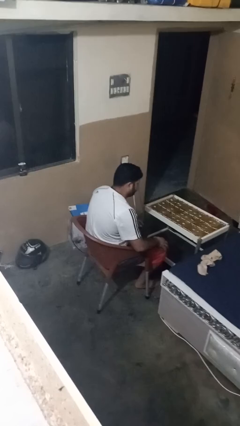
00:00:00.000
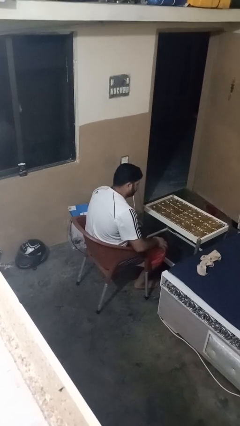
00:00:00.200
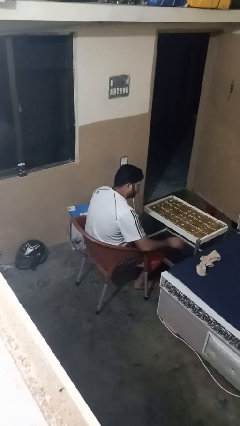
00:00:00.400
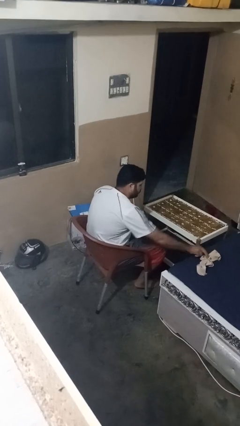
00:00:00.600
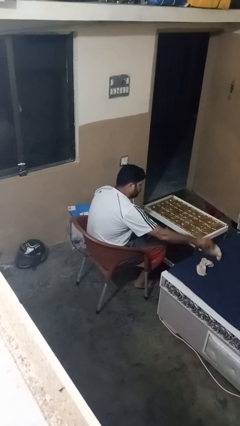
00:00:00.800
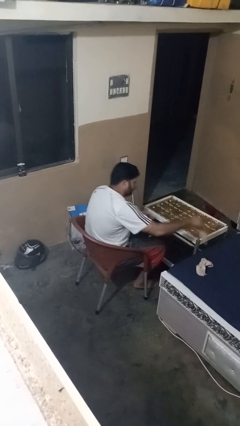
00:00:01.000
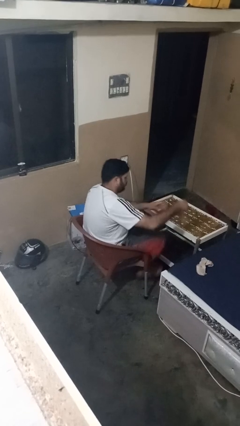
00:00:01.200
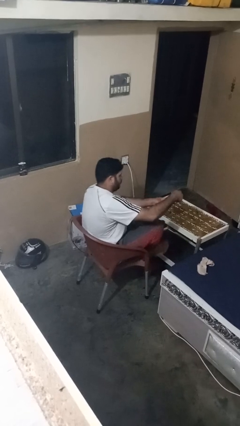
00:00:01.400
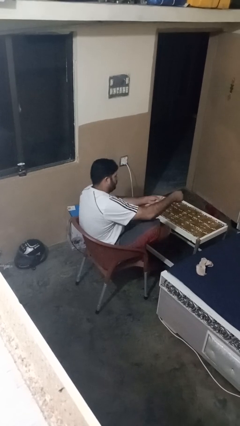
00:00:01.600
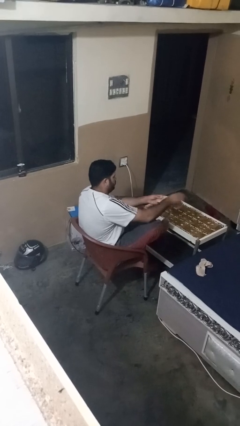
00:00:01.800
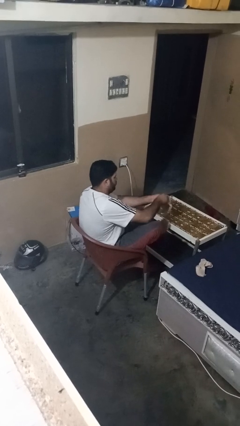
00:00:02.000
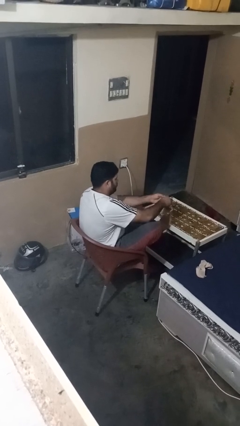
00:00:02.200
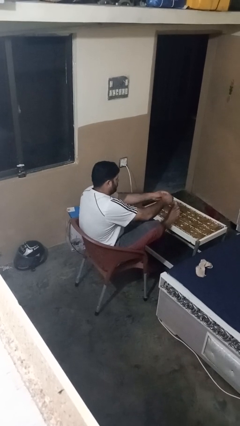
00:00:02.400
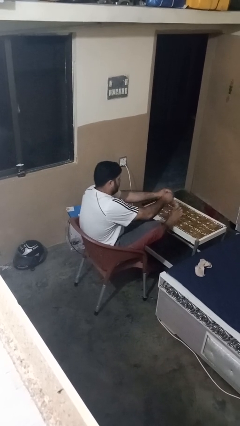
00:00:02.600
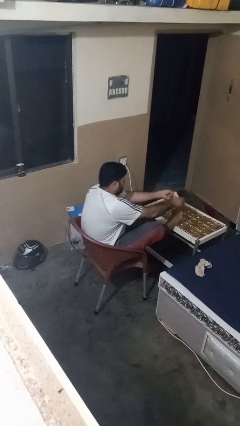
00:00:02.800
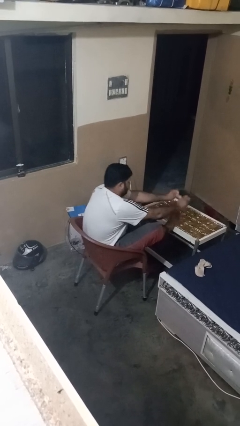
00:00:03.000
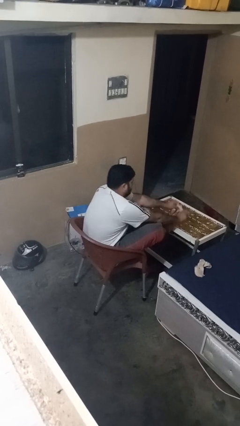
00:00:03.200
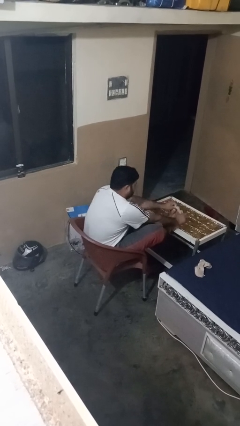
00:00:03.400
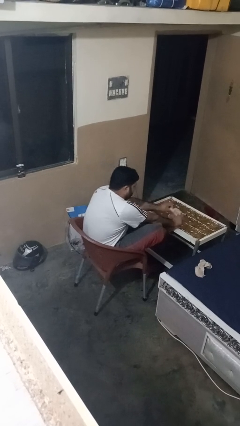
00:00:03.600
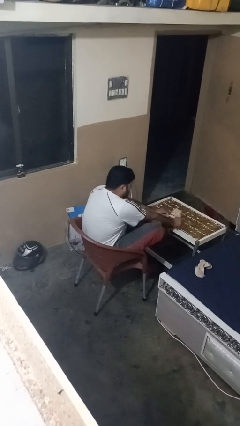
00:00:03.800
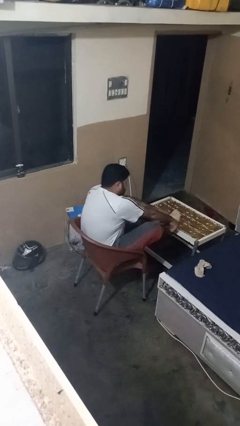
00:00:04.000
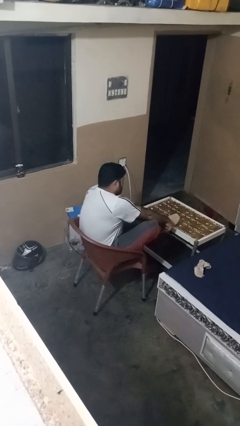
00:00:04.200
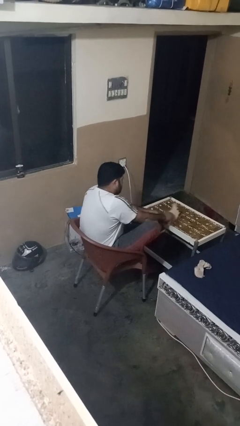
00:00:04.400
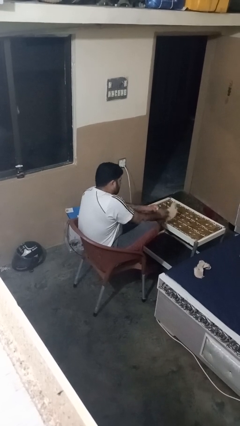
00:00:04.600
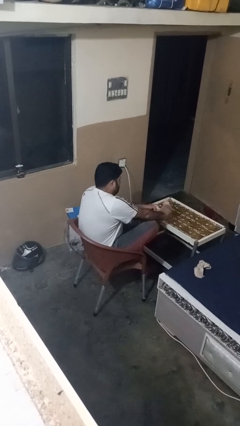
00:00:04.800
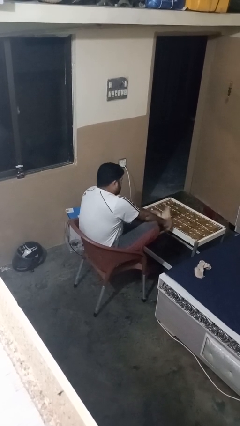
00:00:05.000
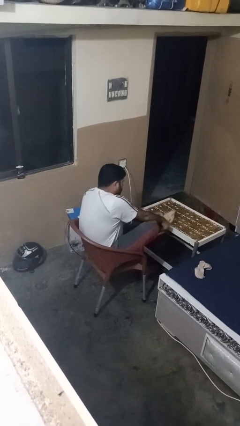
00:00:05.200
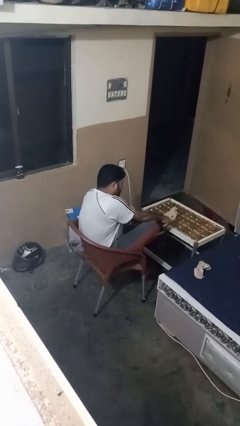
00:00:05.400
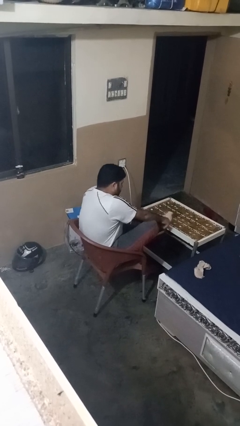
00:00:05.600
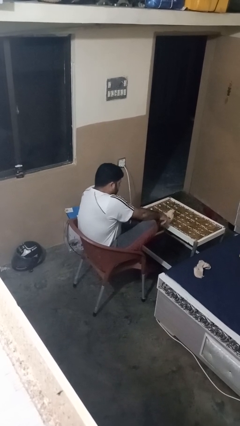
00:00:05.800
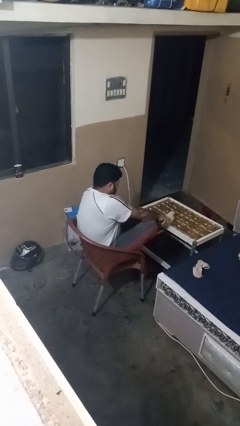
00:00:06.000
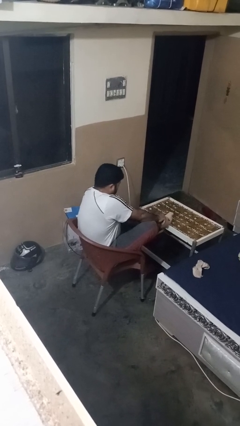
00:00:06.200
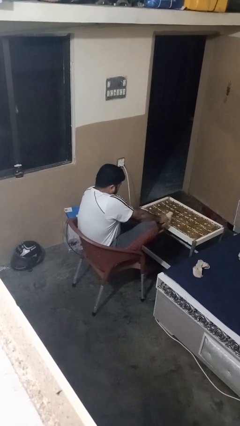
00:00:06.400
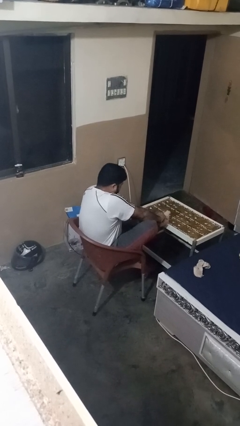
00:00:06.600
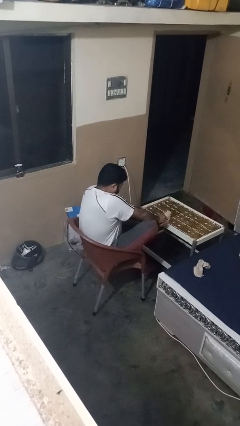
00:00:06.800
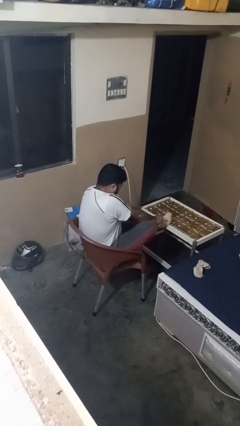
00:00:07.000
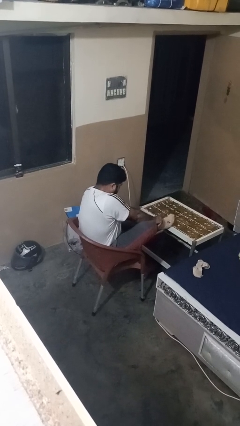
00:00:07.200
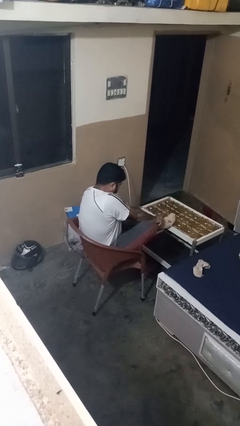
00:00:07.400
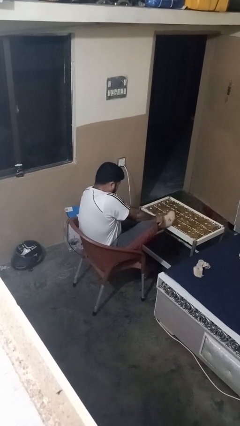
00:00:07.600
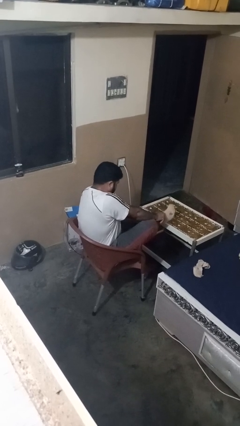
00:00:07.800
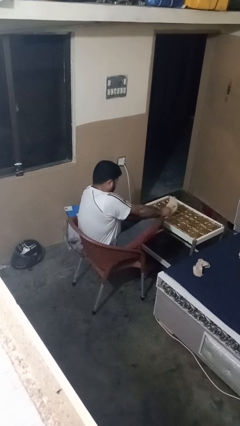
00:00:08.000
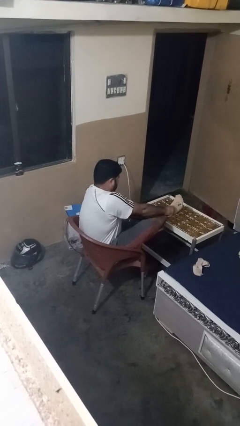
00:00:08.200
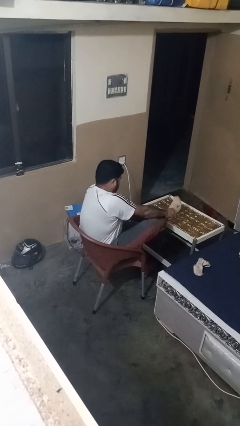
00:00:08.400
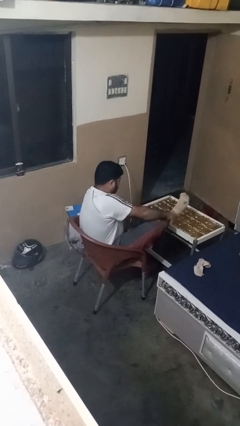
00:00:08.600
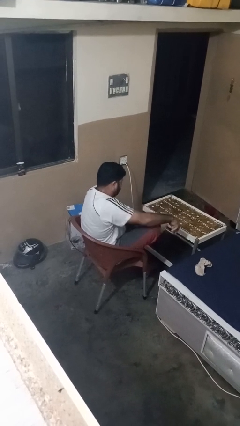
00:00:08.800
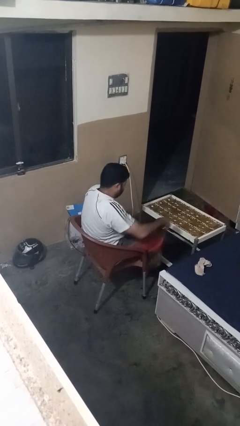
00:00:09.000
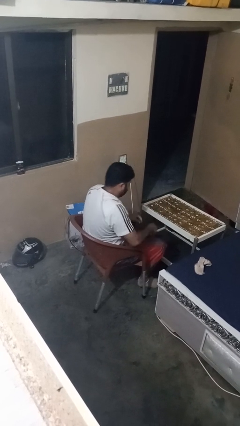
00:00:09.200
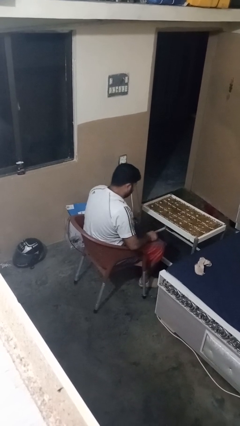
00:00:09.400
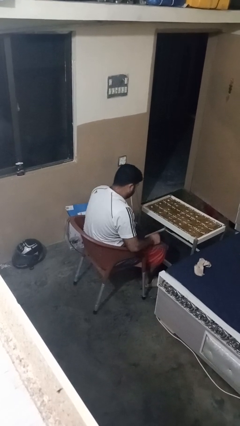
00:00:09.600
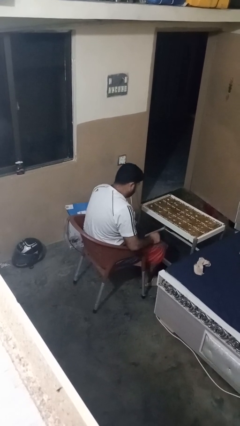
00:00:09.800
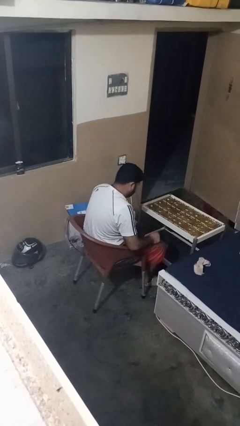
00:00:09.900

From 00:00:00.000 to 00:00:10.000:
person puts on socks

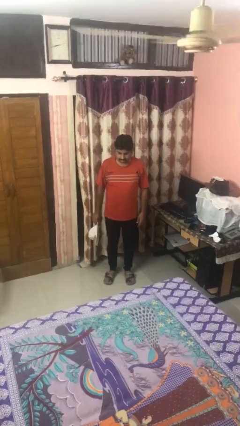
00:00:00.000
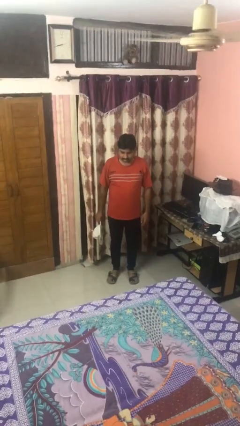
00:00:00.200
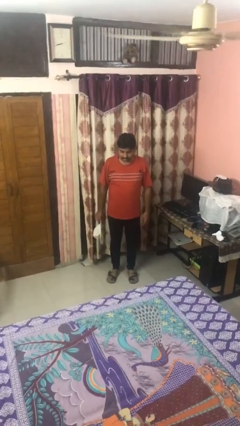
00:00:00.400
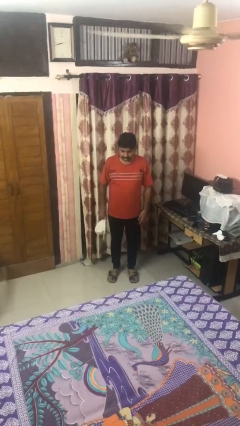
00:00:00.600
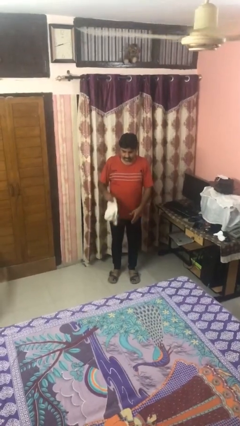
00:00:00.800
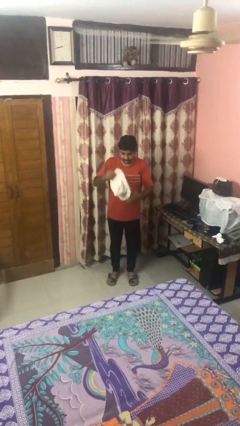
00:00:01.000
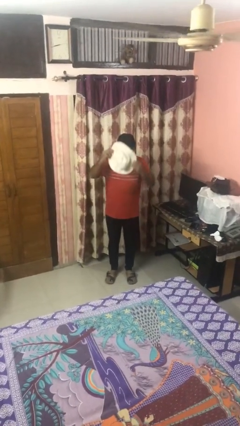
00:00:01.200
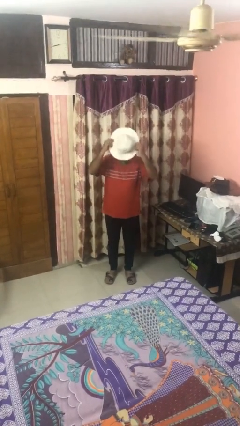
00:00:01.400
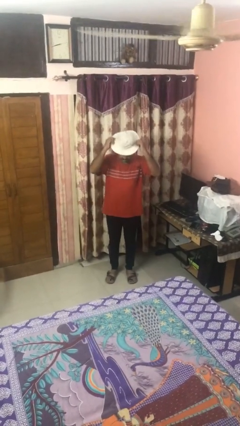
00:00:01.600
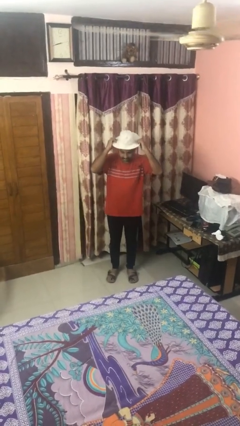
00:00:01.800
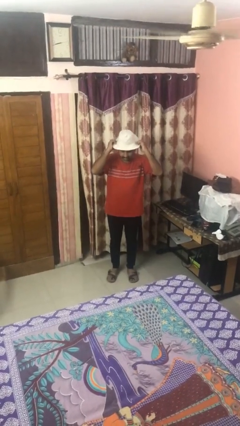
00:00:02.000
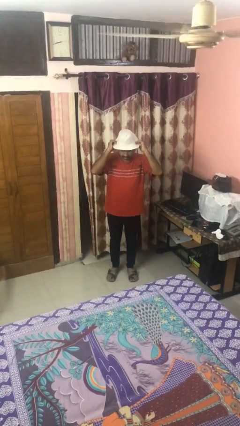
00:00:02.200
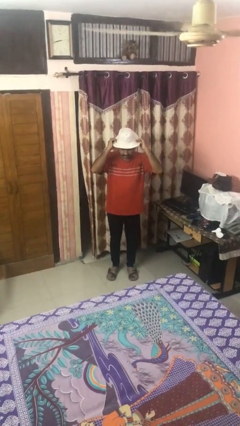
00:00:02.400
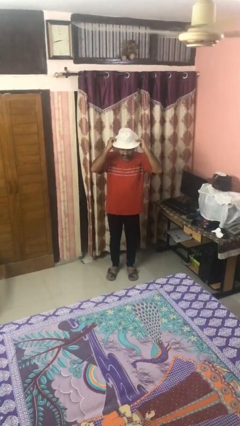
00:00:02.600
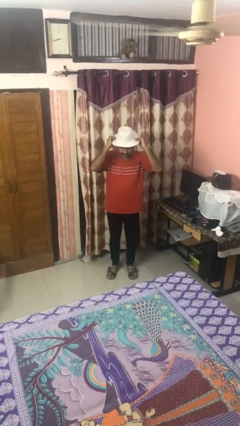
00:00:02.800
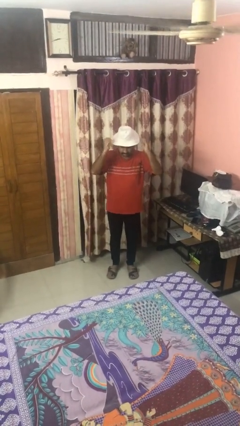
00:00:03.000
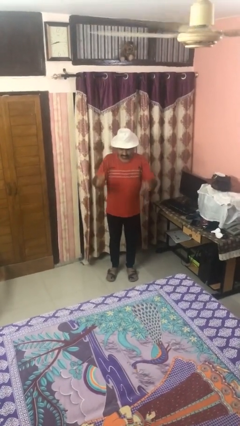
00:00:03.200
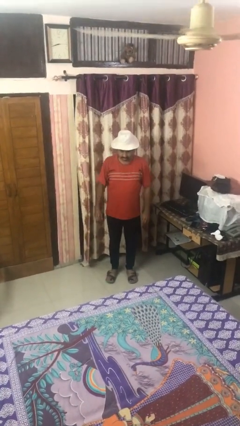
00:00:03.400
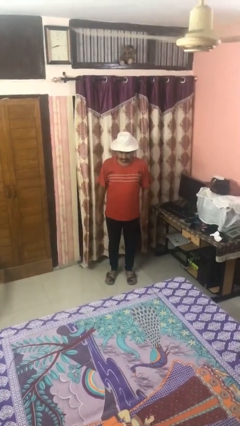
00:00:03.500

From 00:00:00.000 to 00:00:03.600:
person puts on hat

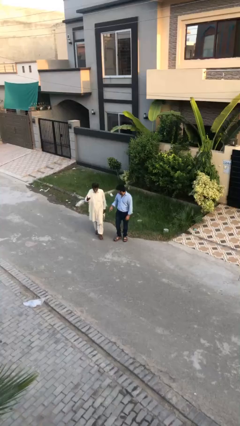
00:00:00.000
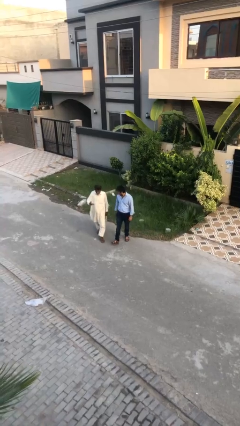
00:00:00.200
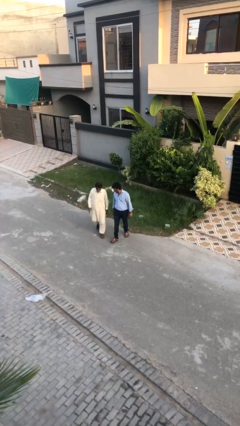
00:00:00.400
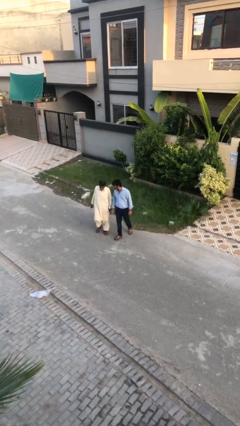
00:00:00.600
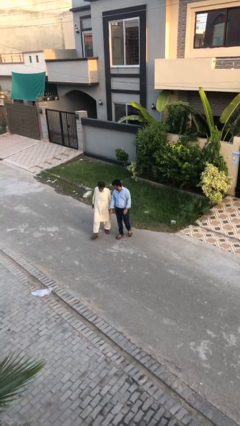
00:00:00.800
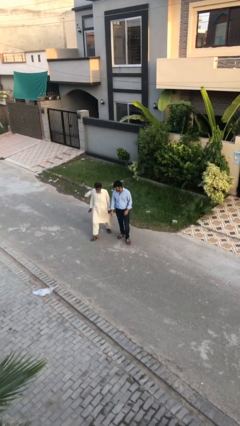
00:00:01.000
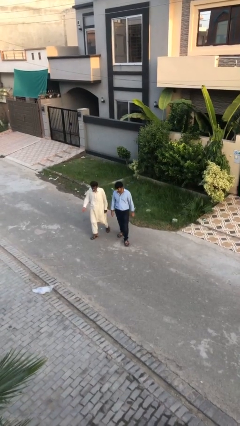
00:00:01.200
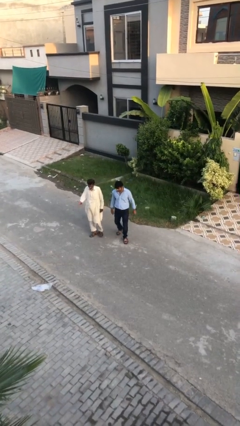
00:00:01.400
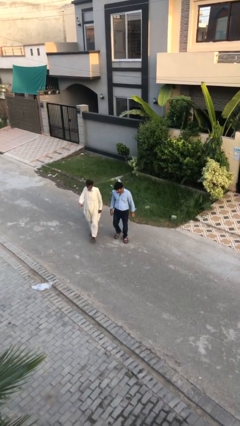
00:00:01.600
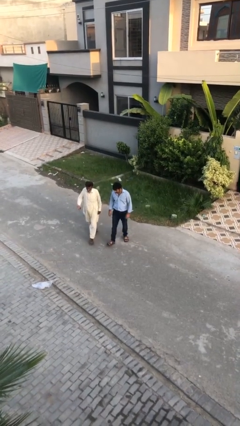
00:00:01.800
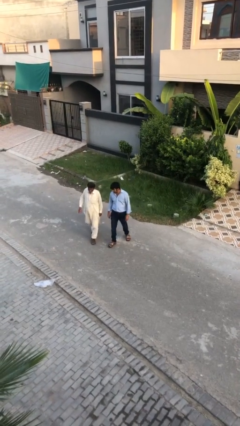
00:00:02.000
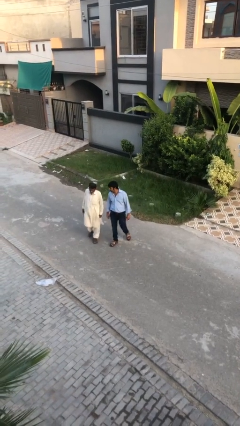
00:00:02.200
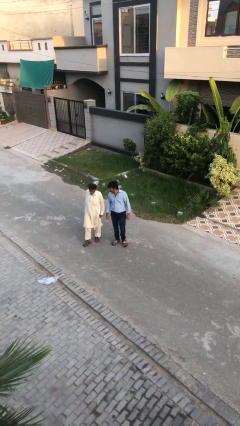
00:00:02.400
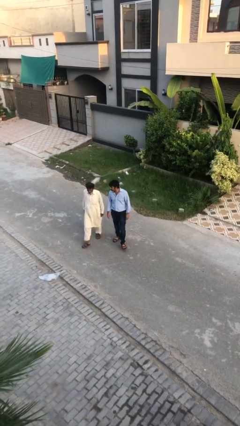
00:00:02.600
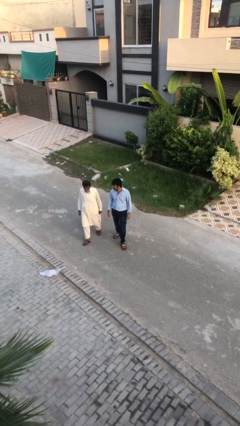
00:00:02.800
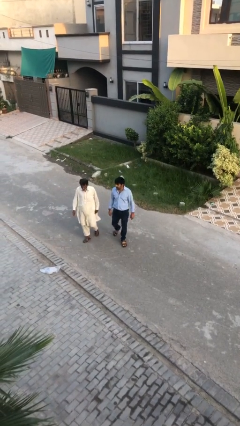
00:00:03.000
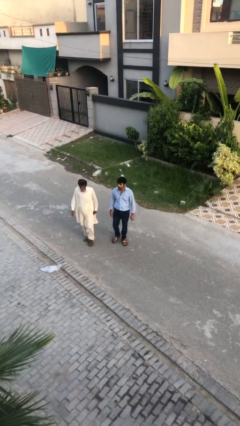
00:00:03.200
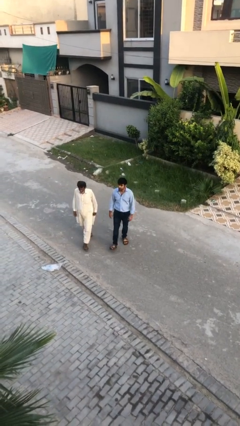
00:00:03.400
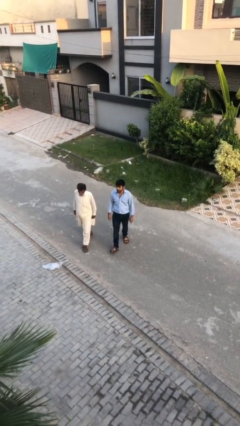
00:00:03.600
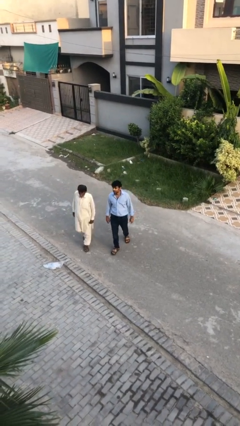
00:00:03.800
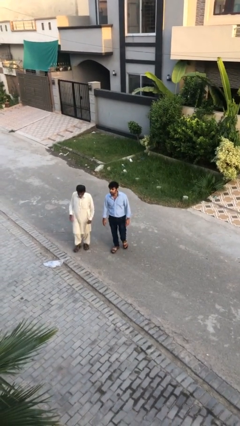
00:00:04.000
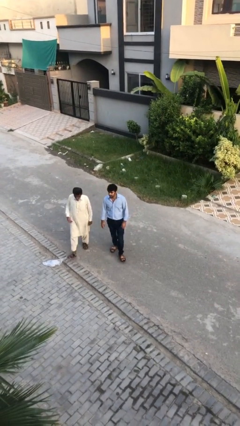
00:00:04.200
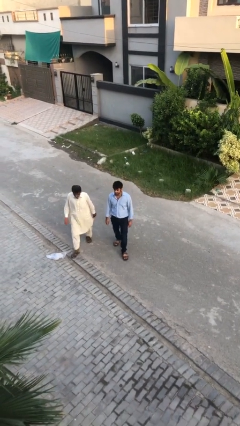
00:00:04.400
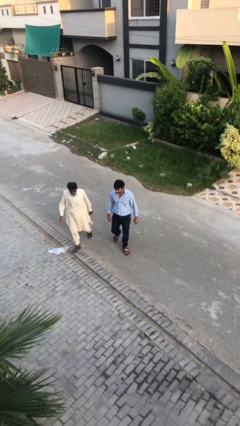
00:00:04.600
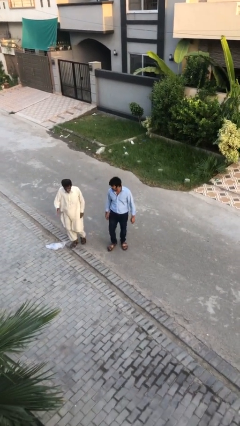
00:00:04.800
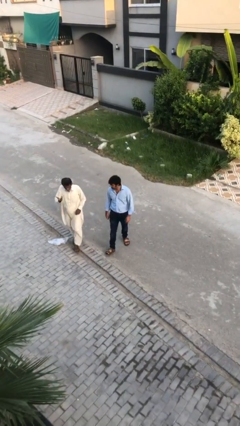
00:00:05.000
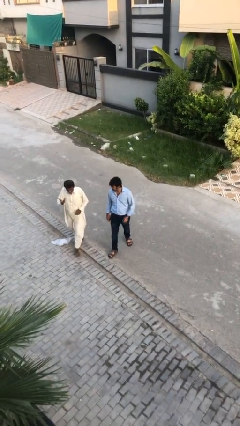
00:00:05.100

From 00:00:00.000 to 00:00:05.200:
person talks to person
